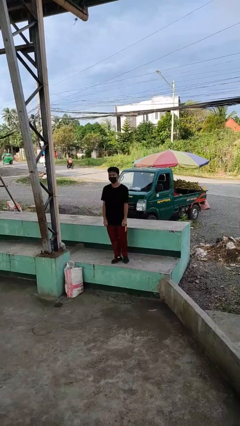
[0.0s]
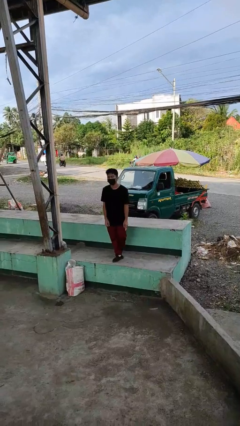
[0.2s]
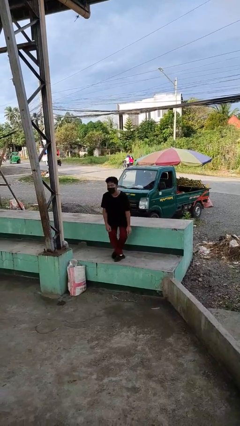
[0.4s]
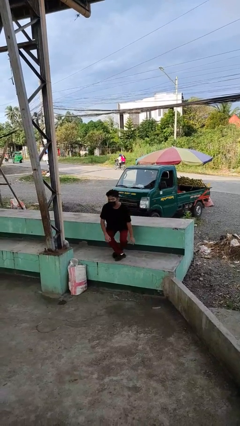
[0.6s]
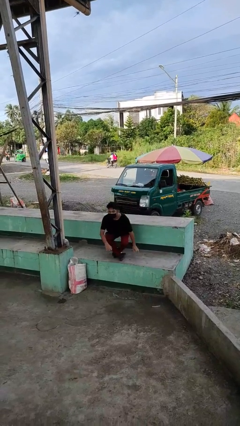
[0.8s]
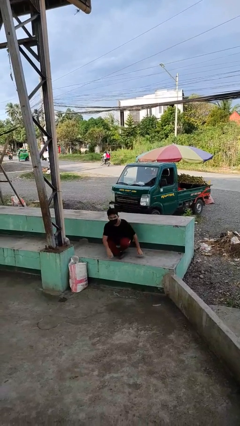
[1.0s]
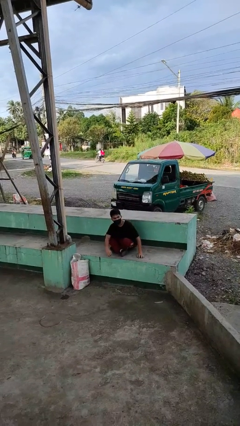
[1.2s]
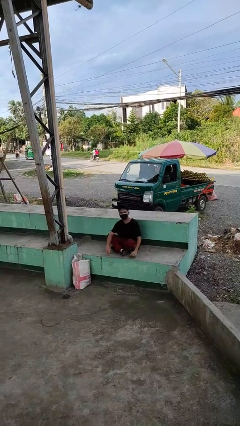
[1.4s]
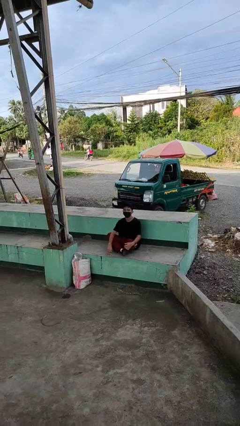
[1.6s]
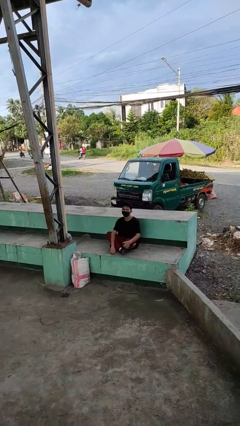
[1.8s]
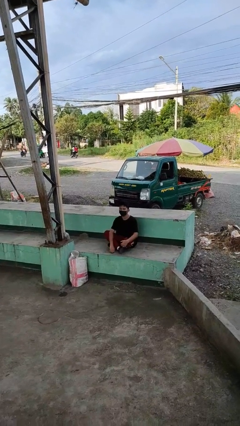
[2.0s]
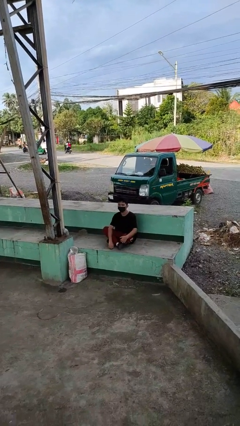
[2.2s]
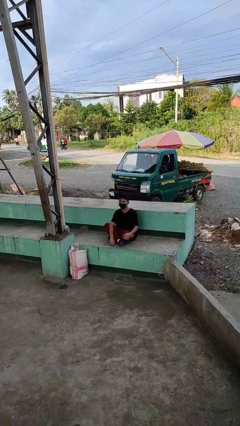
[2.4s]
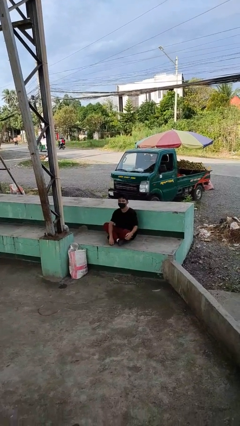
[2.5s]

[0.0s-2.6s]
person sits crisscross

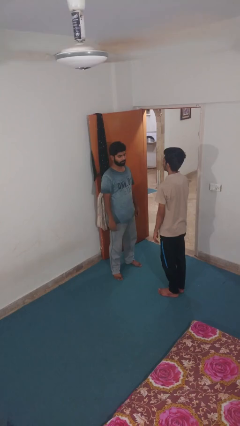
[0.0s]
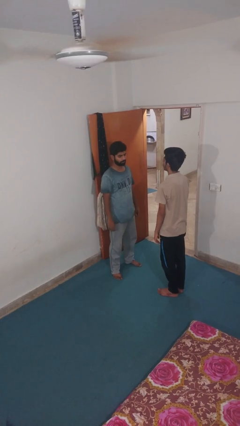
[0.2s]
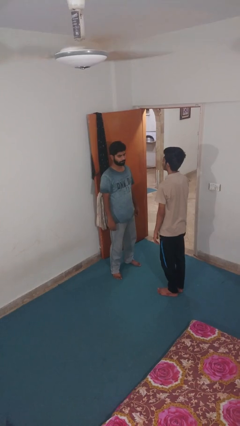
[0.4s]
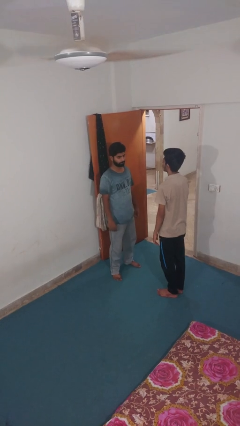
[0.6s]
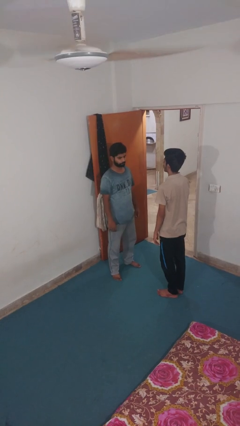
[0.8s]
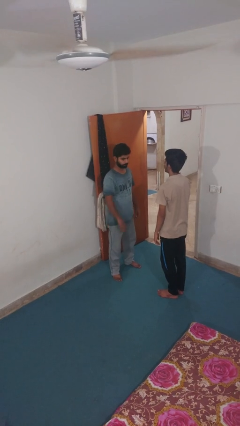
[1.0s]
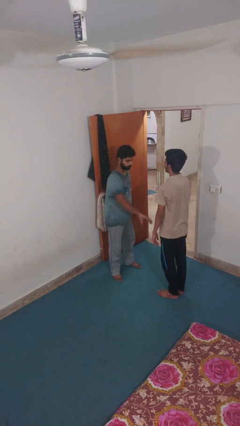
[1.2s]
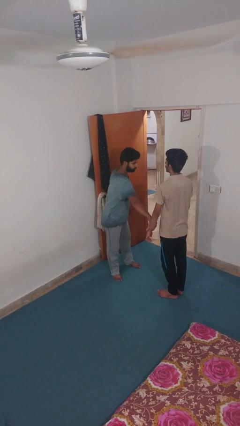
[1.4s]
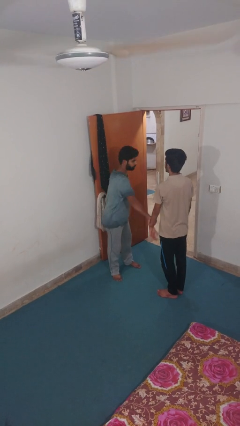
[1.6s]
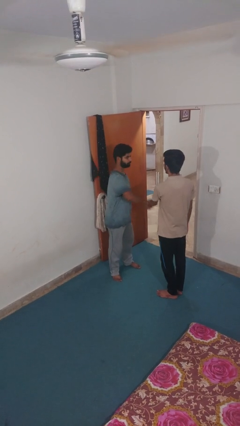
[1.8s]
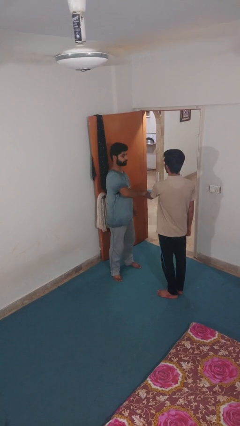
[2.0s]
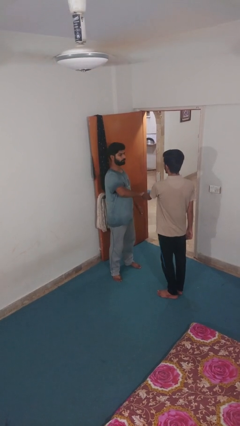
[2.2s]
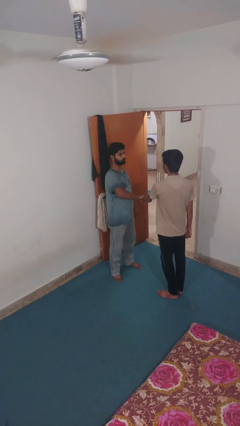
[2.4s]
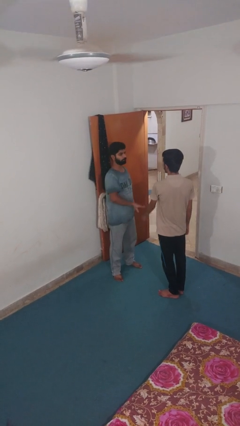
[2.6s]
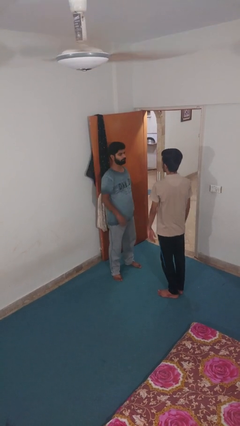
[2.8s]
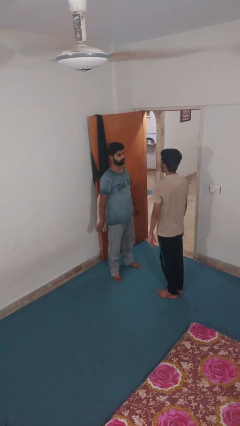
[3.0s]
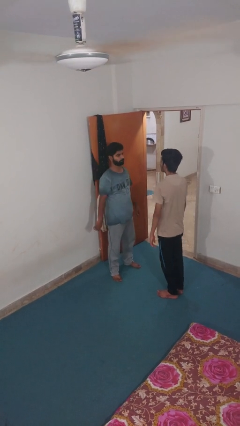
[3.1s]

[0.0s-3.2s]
person grabs person by forearm

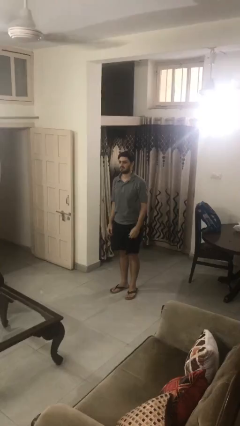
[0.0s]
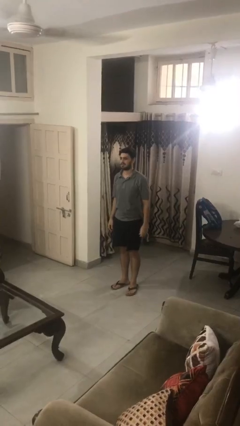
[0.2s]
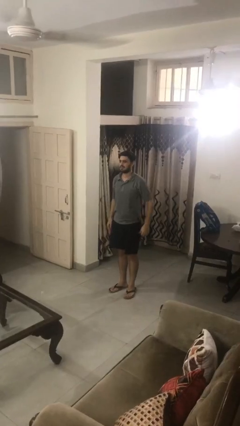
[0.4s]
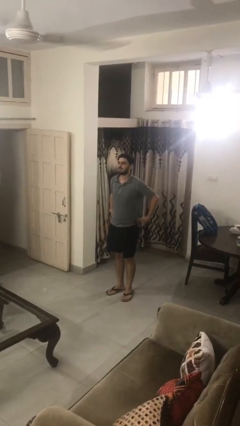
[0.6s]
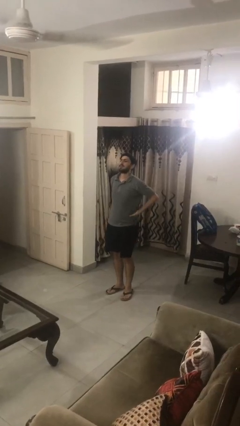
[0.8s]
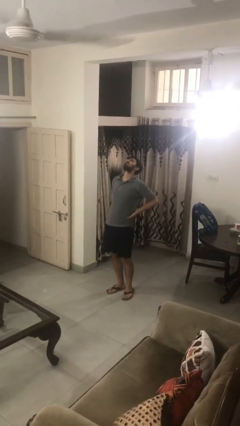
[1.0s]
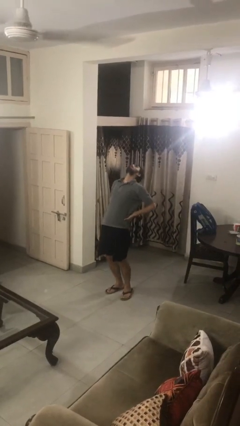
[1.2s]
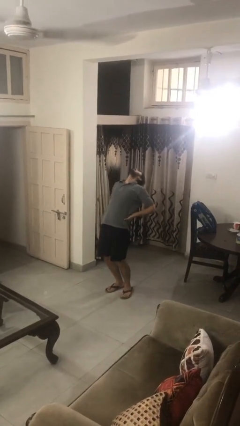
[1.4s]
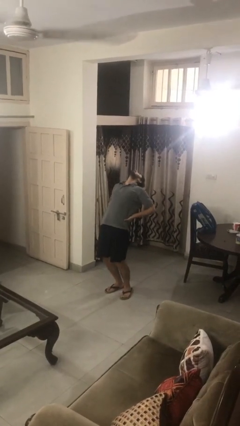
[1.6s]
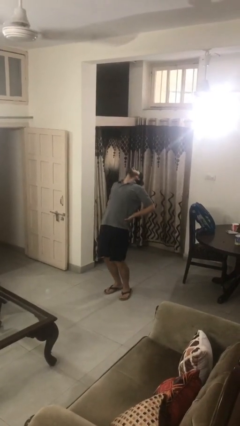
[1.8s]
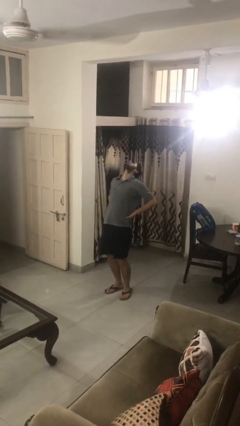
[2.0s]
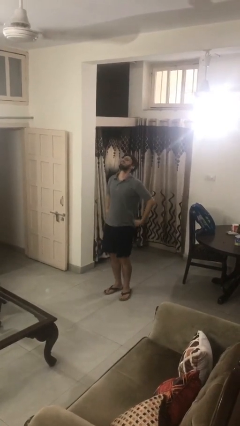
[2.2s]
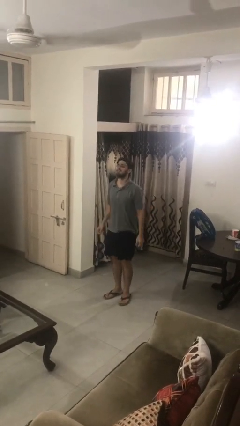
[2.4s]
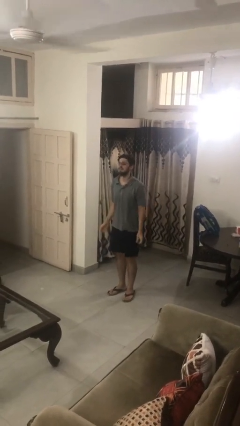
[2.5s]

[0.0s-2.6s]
person stretches back

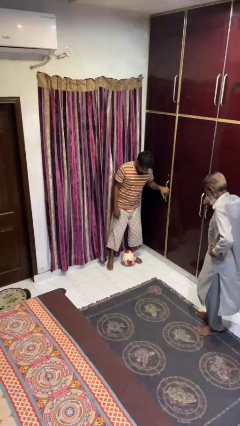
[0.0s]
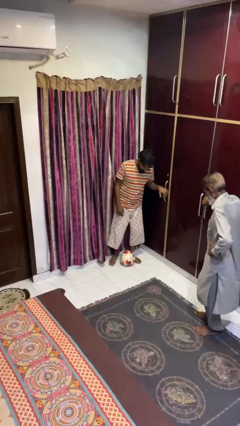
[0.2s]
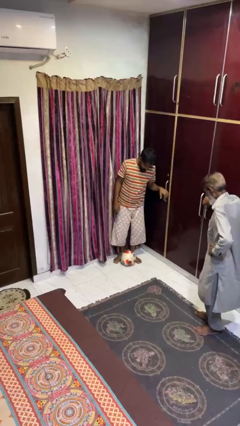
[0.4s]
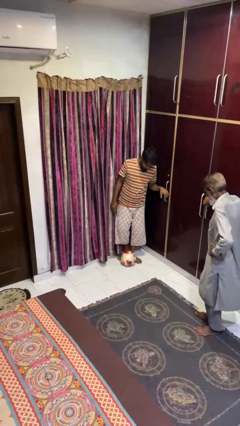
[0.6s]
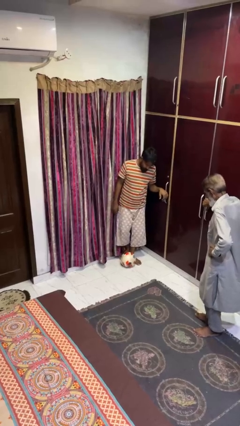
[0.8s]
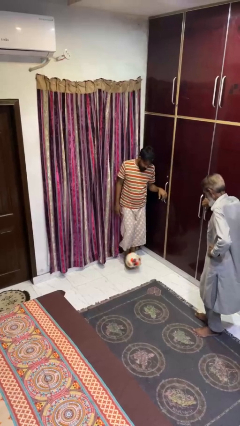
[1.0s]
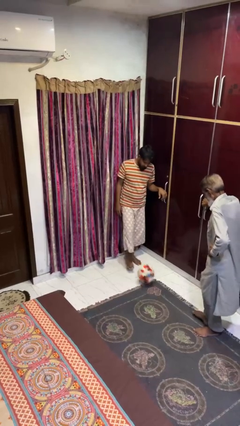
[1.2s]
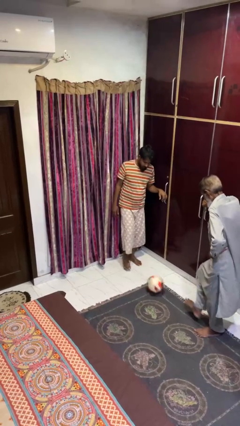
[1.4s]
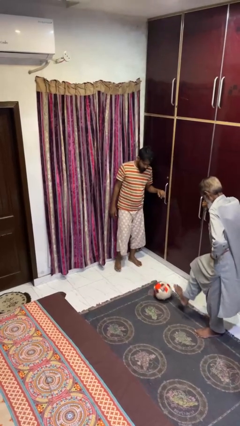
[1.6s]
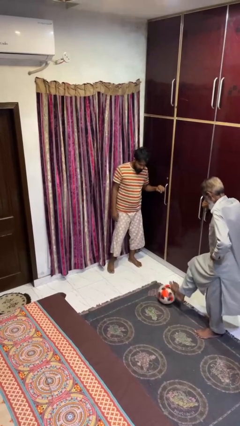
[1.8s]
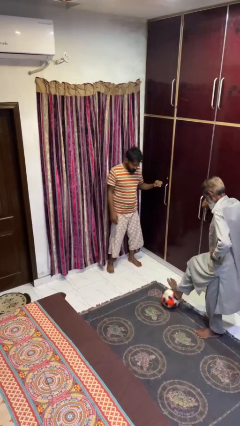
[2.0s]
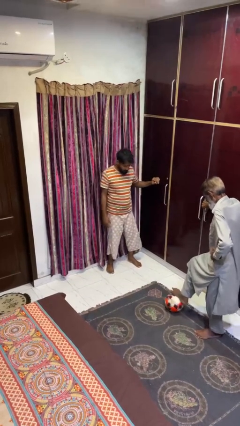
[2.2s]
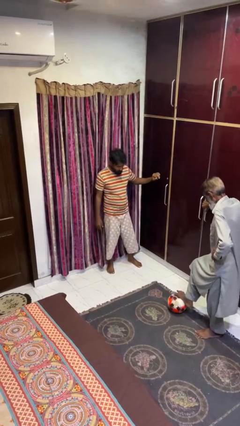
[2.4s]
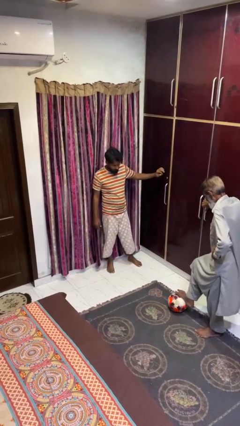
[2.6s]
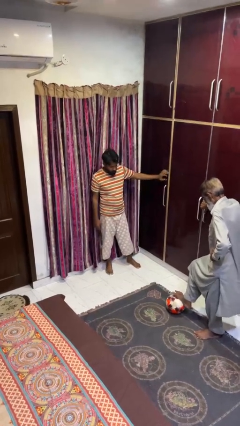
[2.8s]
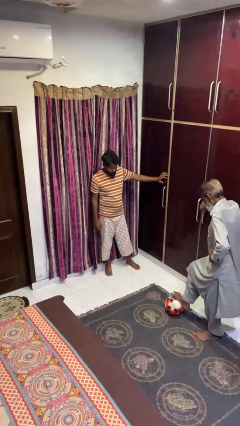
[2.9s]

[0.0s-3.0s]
person kicks object to person

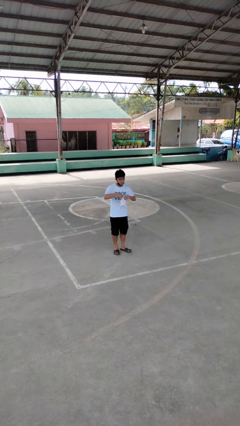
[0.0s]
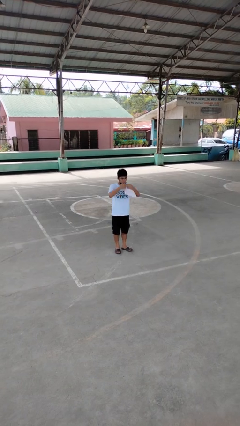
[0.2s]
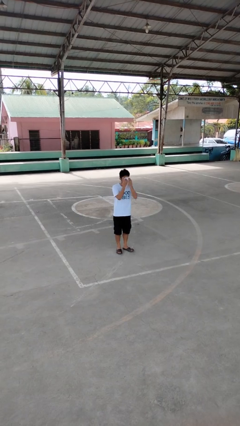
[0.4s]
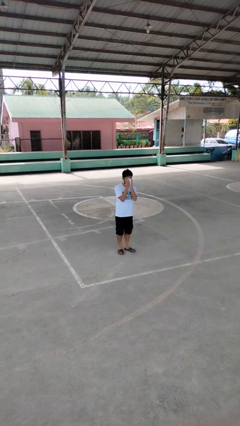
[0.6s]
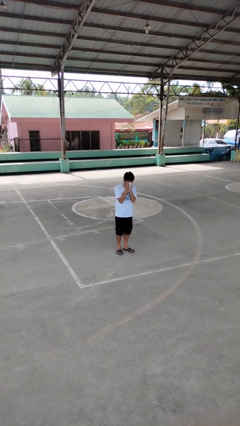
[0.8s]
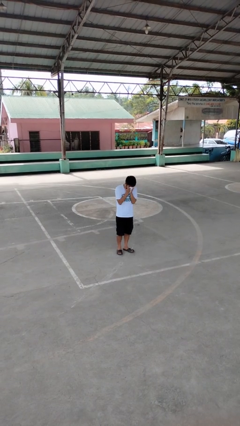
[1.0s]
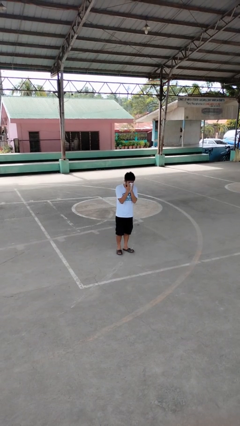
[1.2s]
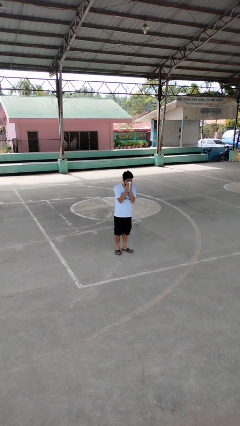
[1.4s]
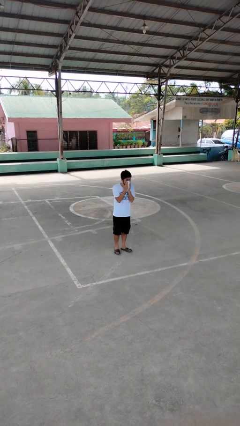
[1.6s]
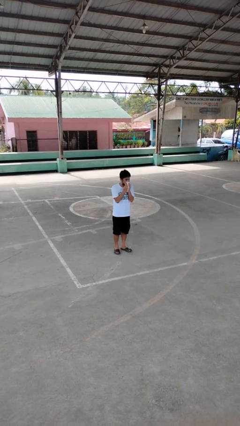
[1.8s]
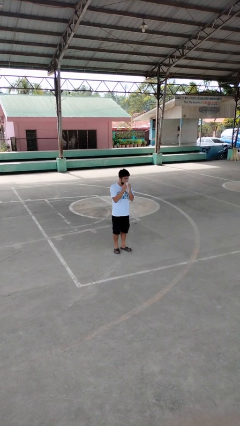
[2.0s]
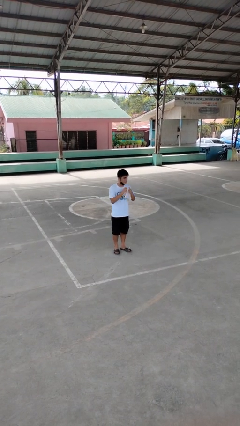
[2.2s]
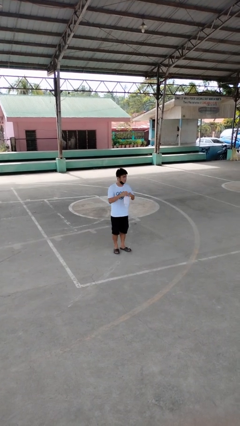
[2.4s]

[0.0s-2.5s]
person blows nose

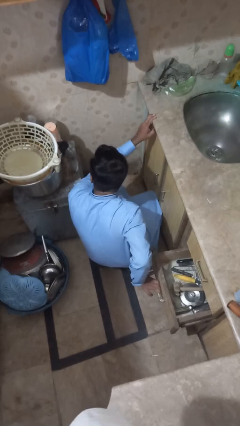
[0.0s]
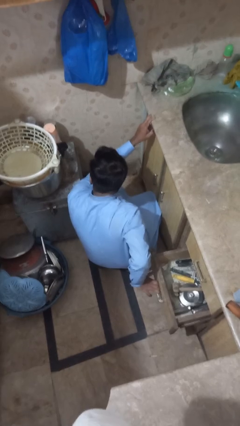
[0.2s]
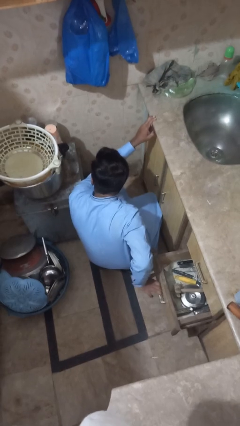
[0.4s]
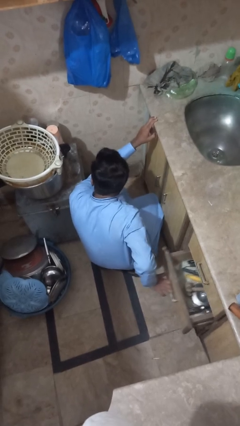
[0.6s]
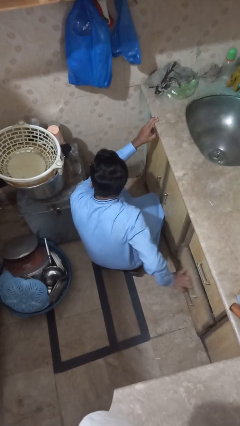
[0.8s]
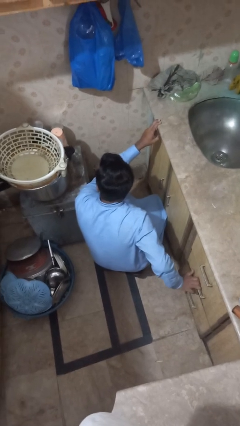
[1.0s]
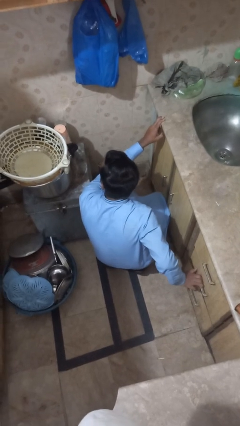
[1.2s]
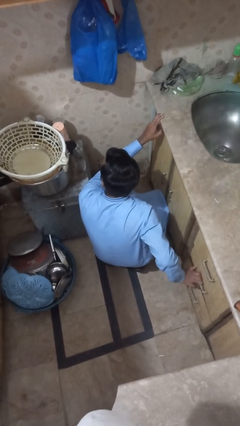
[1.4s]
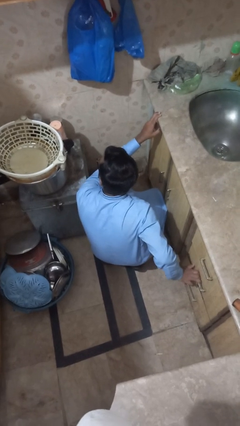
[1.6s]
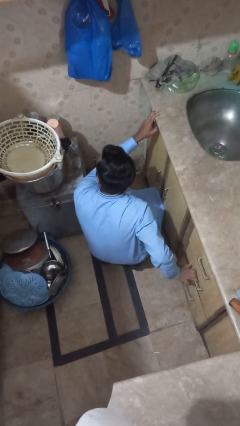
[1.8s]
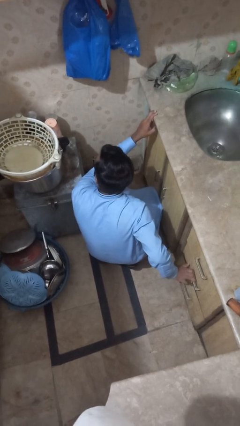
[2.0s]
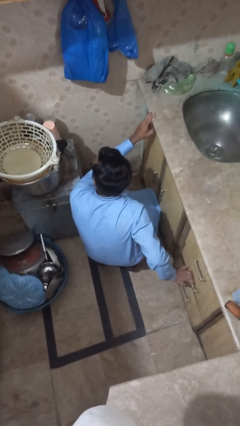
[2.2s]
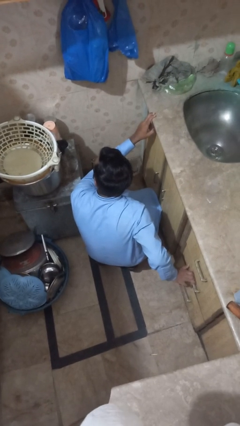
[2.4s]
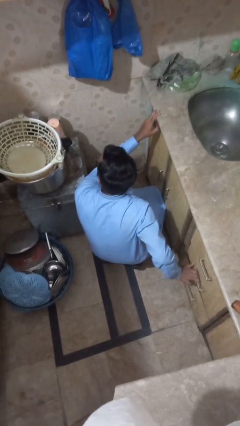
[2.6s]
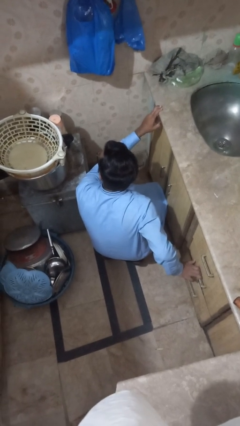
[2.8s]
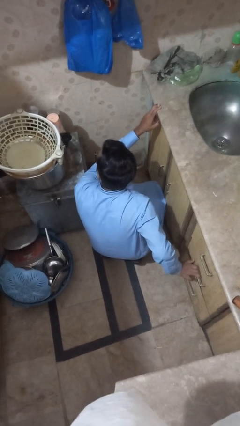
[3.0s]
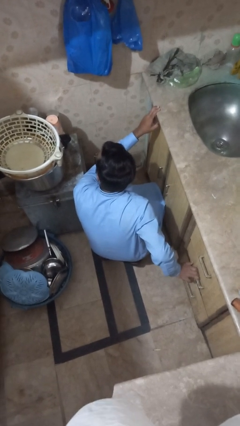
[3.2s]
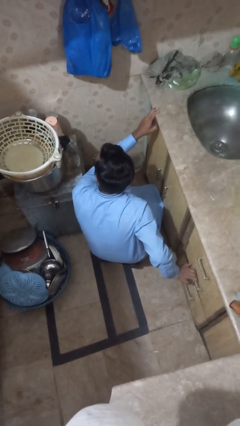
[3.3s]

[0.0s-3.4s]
person closes kitchen drawer

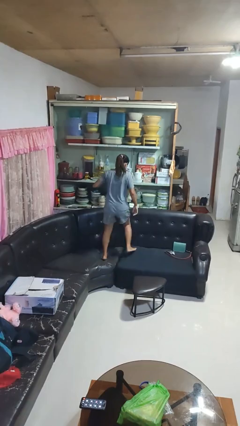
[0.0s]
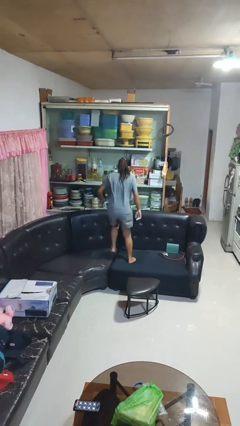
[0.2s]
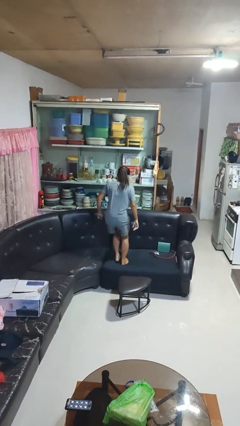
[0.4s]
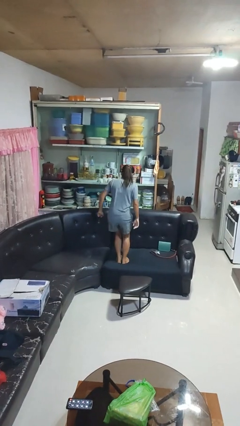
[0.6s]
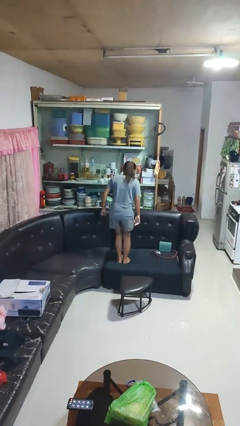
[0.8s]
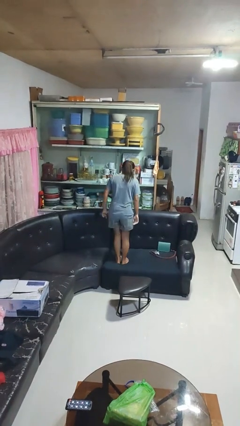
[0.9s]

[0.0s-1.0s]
person jumps on couch
